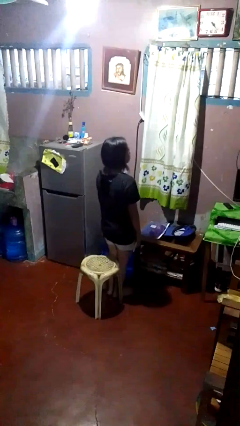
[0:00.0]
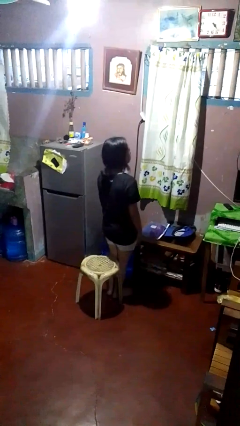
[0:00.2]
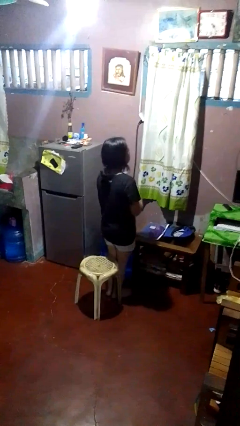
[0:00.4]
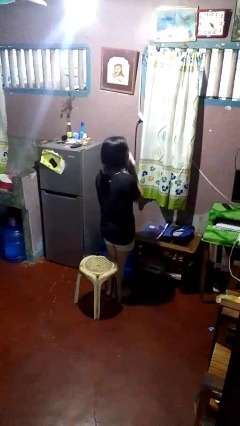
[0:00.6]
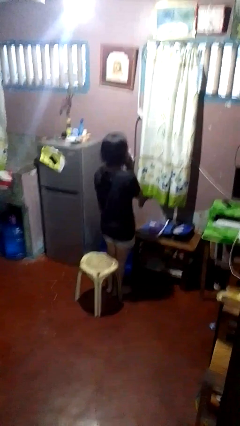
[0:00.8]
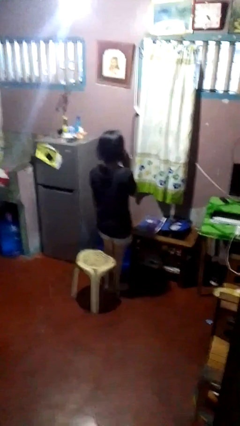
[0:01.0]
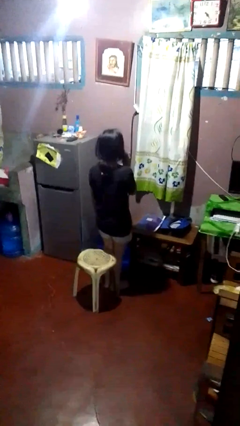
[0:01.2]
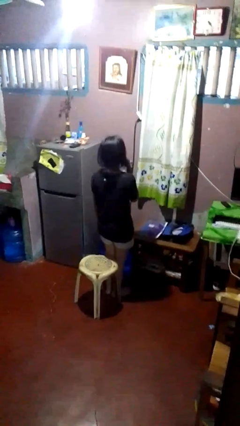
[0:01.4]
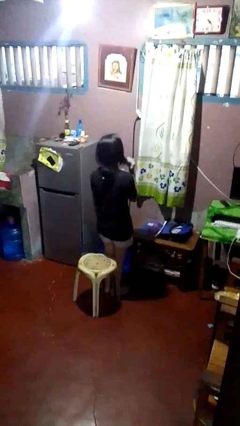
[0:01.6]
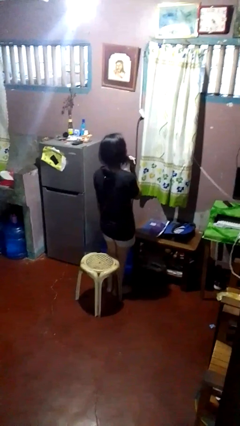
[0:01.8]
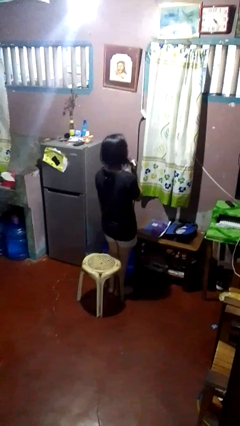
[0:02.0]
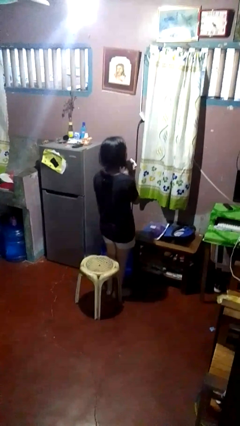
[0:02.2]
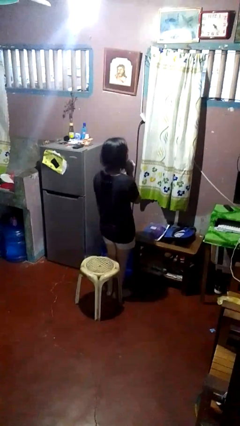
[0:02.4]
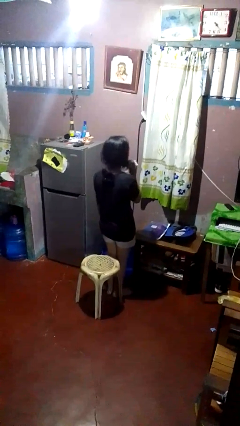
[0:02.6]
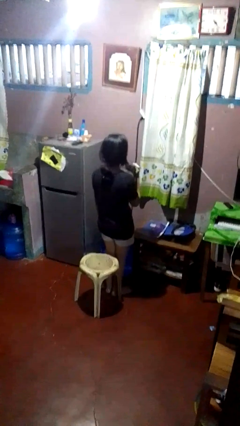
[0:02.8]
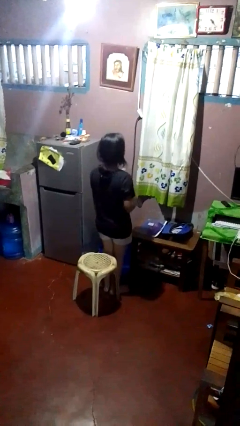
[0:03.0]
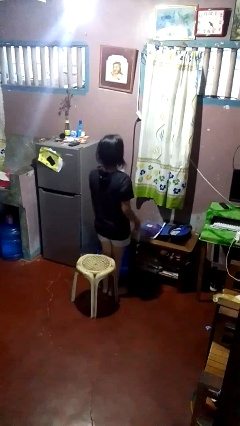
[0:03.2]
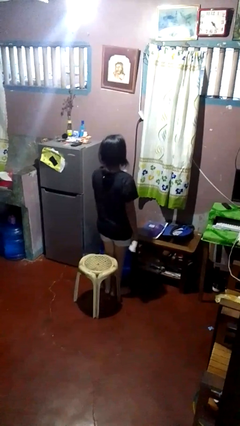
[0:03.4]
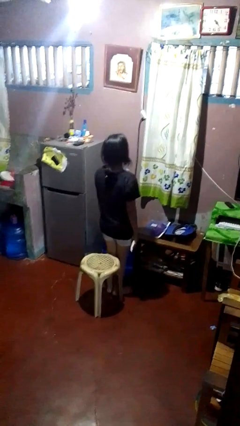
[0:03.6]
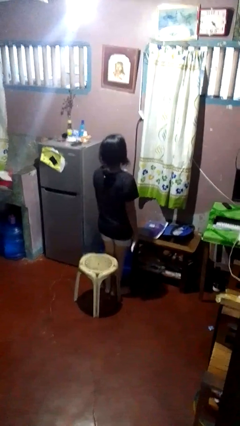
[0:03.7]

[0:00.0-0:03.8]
person wipes mouth with napkin

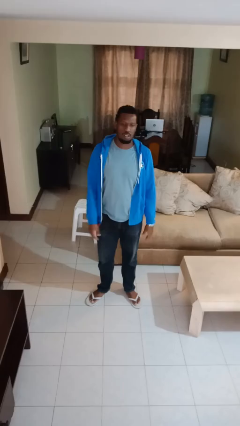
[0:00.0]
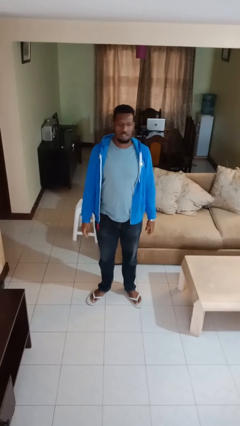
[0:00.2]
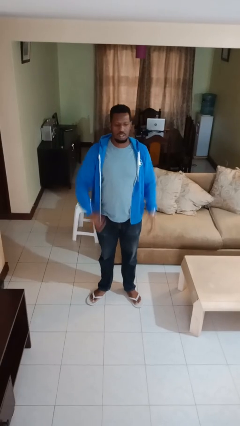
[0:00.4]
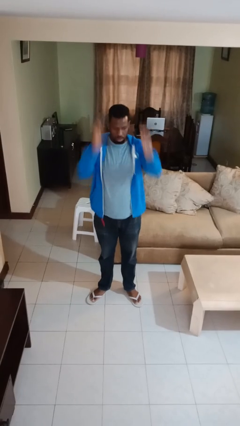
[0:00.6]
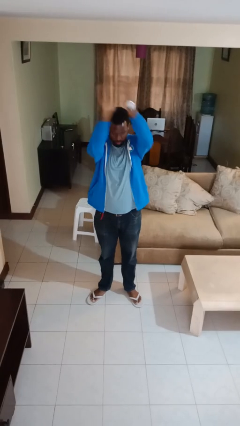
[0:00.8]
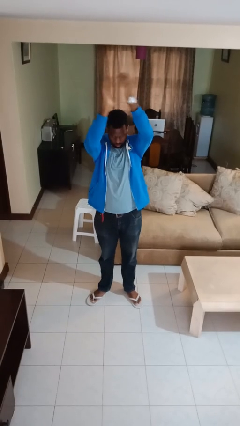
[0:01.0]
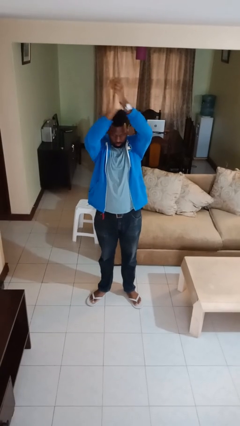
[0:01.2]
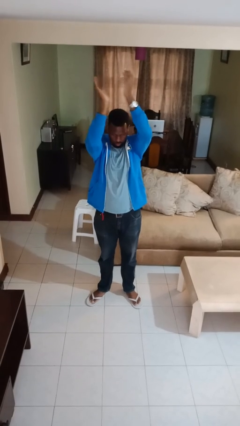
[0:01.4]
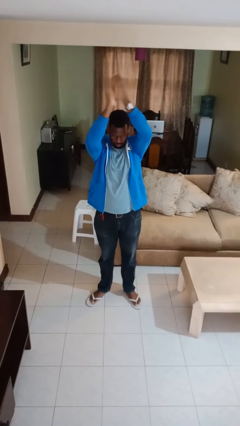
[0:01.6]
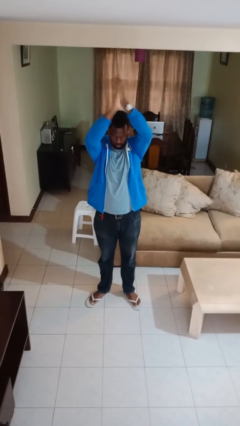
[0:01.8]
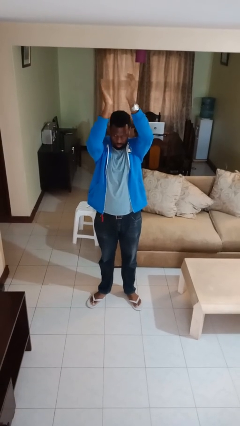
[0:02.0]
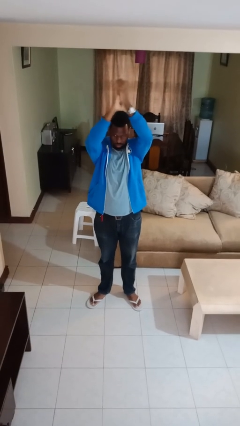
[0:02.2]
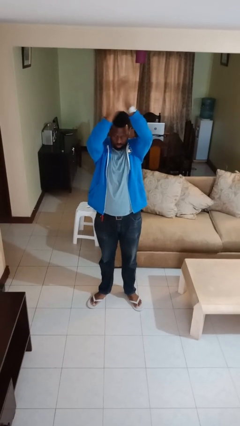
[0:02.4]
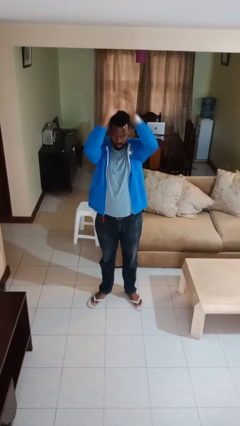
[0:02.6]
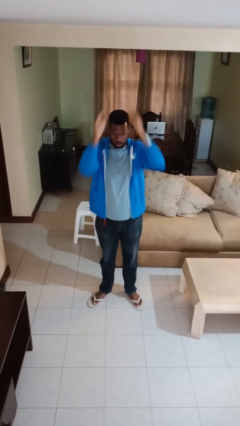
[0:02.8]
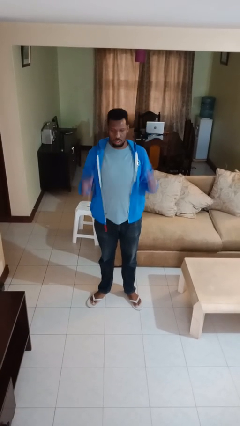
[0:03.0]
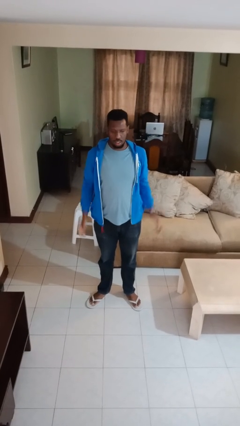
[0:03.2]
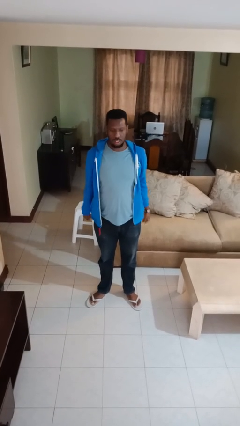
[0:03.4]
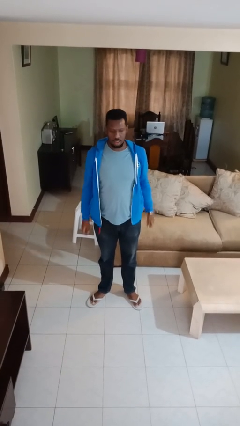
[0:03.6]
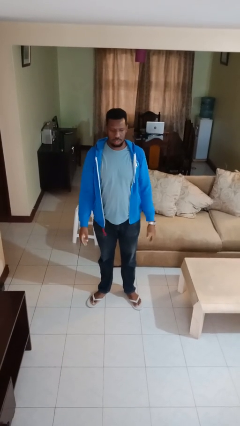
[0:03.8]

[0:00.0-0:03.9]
person claps hands

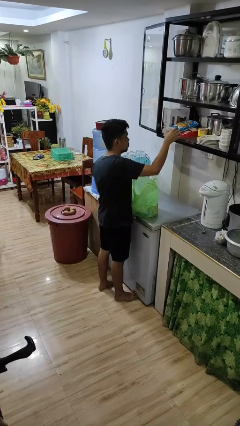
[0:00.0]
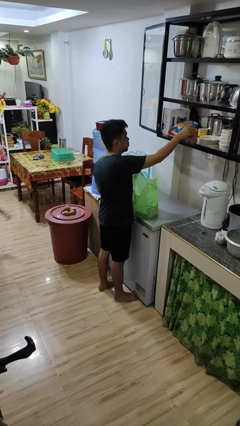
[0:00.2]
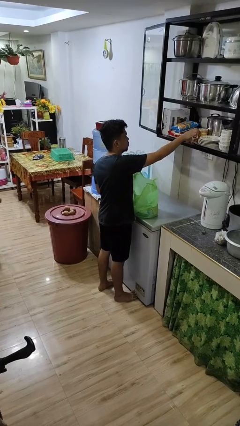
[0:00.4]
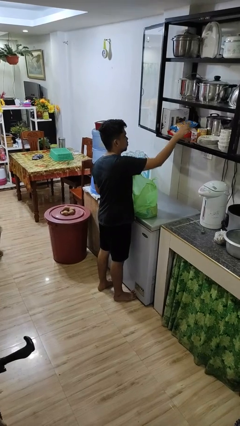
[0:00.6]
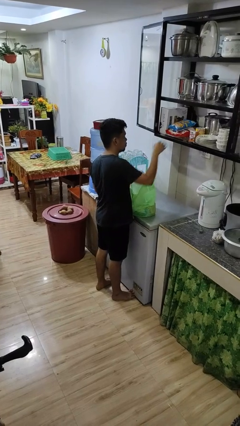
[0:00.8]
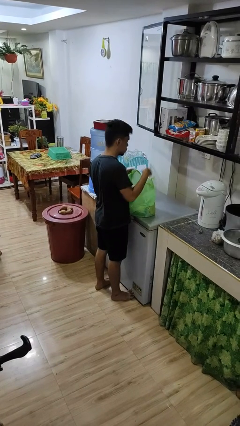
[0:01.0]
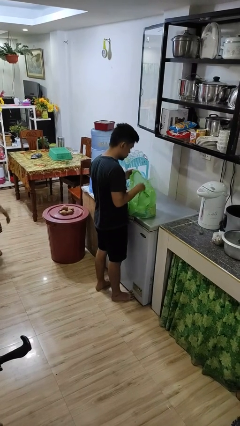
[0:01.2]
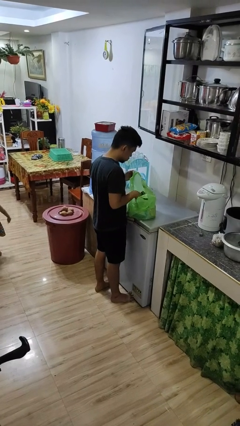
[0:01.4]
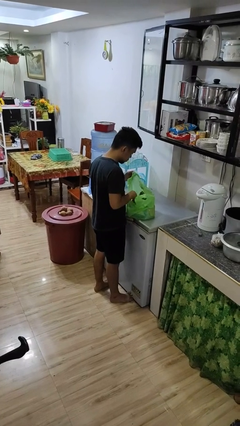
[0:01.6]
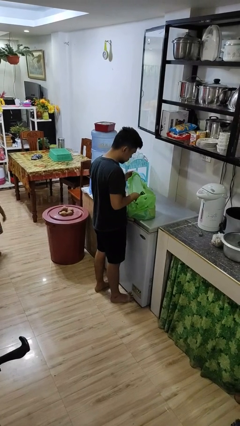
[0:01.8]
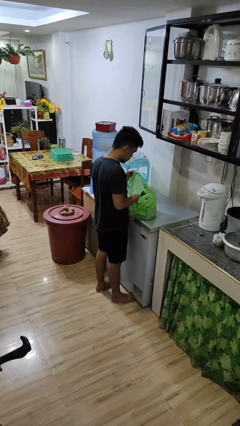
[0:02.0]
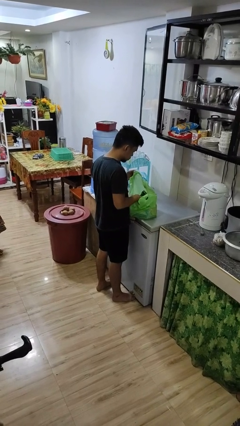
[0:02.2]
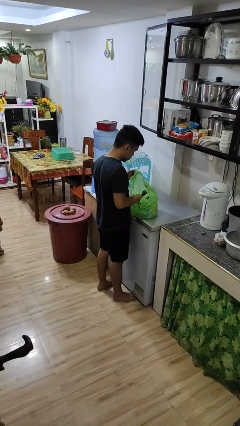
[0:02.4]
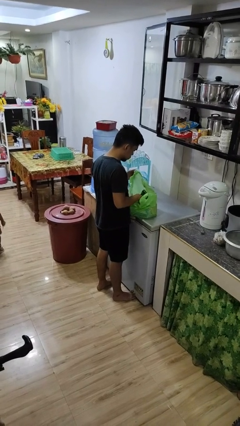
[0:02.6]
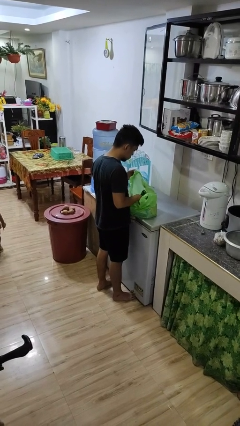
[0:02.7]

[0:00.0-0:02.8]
person loads groceries into cabinet

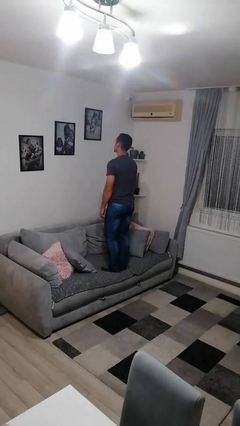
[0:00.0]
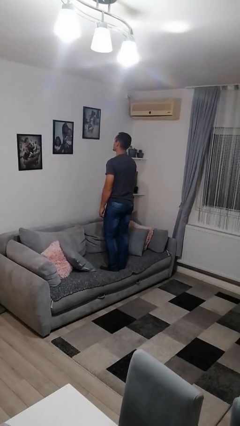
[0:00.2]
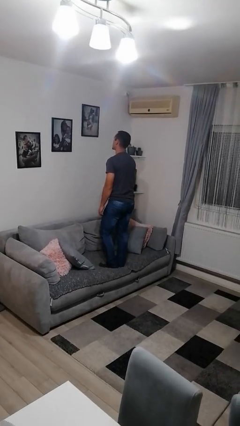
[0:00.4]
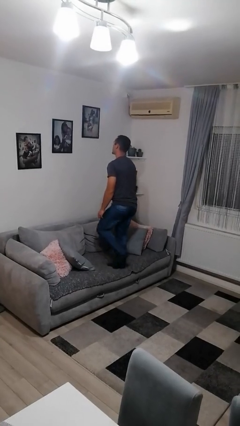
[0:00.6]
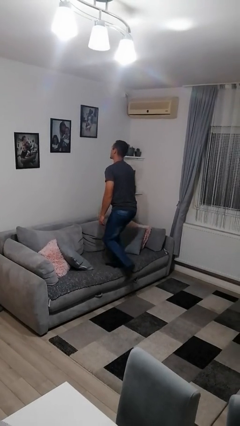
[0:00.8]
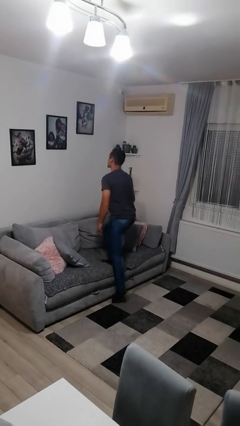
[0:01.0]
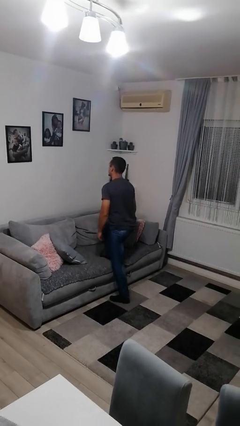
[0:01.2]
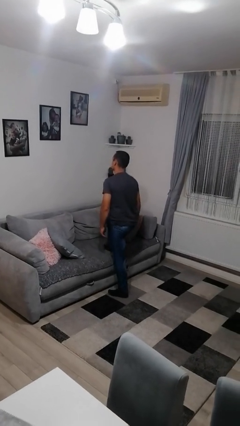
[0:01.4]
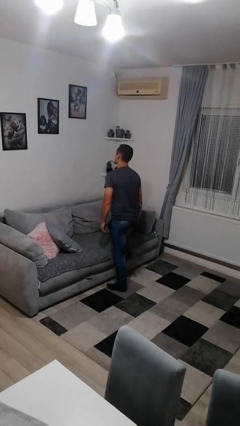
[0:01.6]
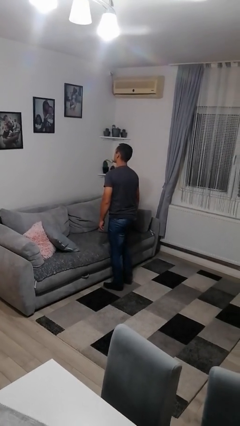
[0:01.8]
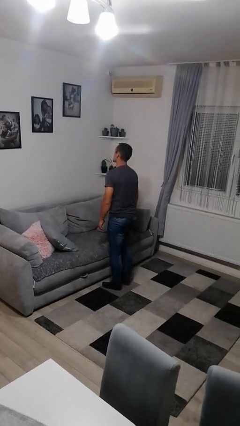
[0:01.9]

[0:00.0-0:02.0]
person climbs off couch

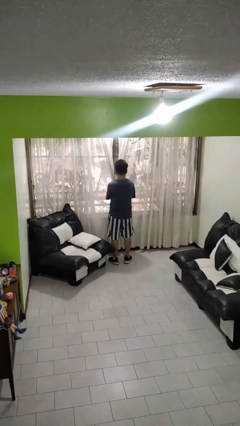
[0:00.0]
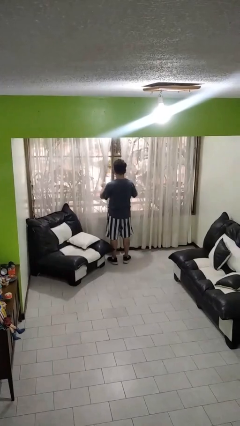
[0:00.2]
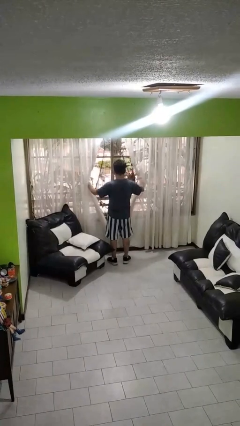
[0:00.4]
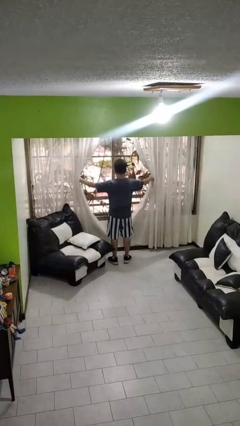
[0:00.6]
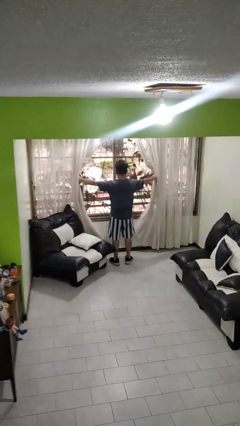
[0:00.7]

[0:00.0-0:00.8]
person opens curtains

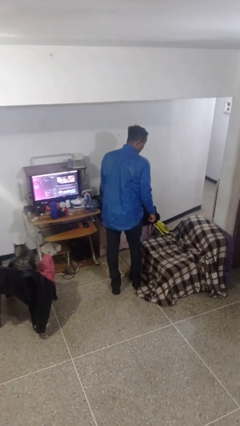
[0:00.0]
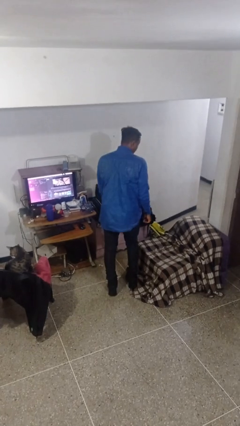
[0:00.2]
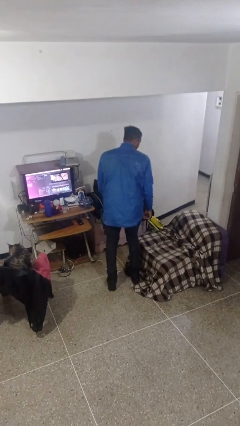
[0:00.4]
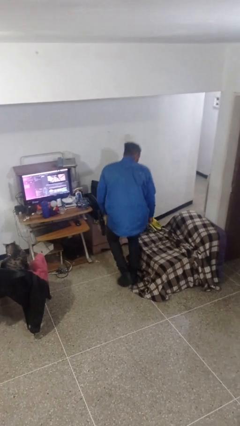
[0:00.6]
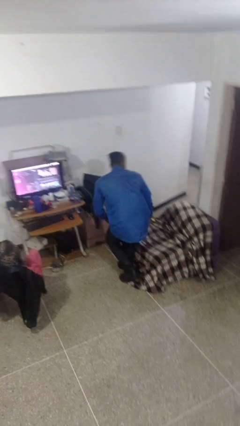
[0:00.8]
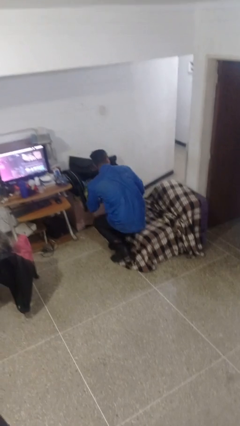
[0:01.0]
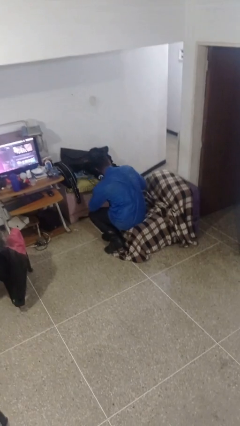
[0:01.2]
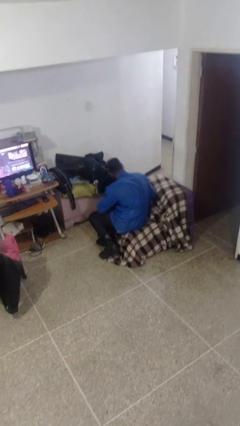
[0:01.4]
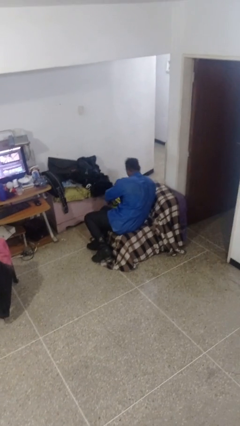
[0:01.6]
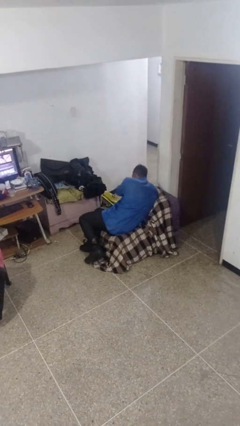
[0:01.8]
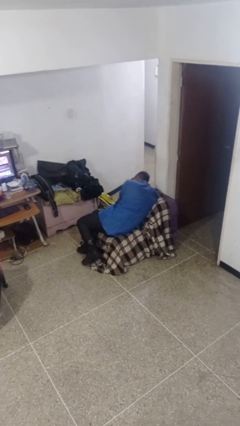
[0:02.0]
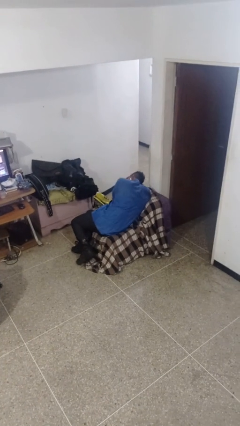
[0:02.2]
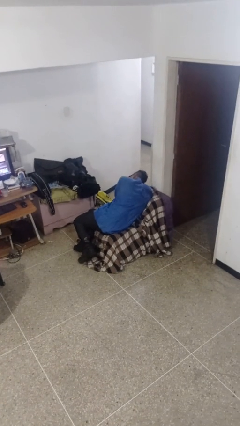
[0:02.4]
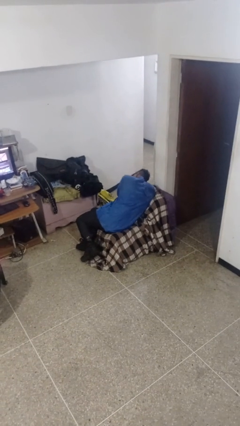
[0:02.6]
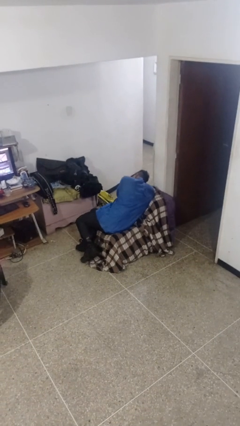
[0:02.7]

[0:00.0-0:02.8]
person lies down on couch

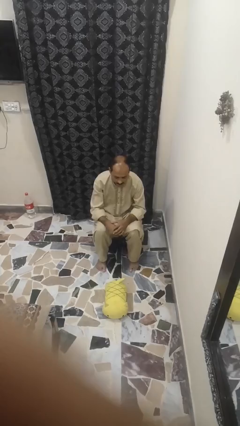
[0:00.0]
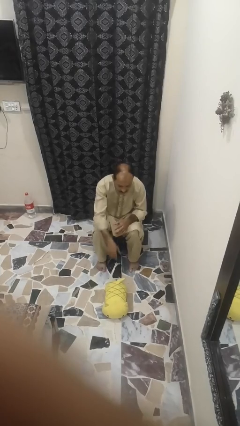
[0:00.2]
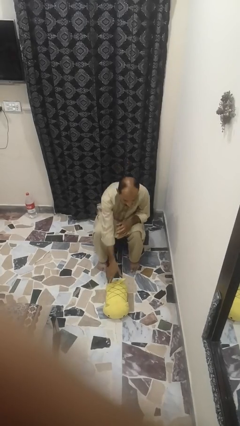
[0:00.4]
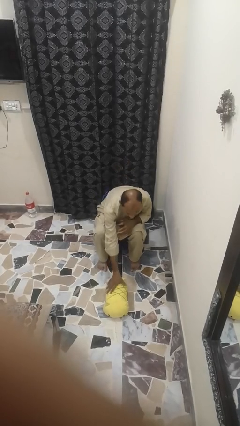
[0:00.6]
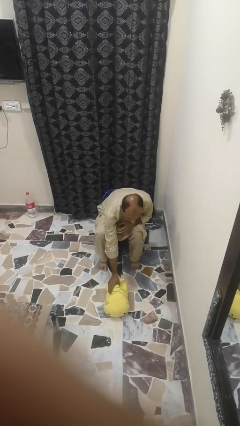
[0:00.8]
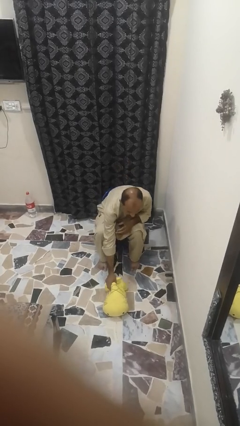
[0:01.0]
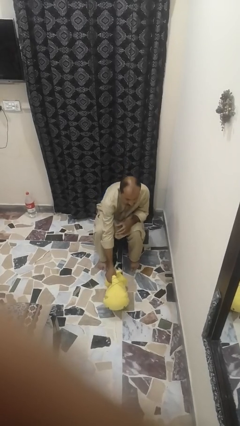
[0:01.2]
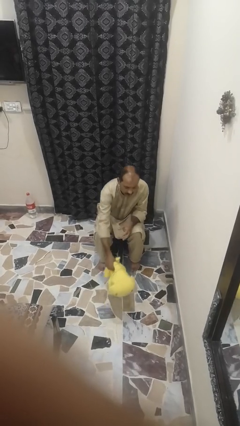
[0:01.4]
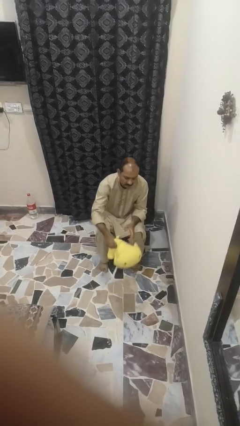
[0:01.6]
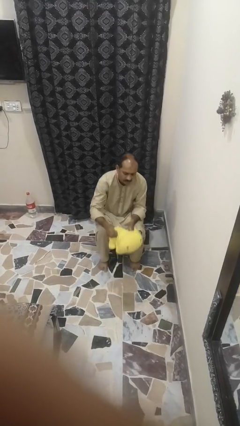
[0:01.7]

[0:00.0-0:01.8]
person picks up object from floor
